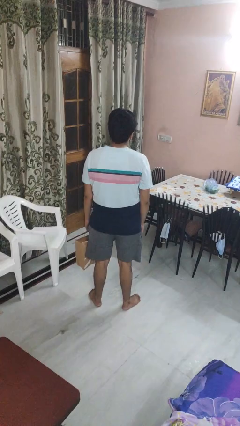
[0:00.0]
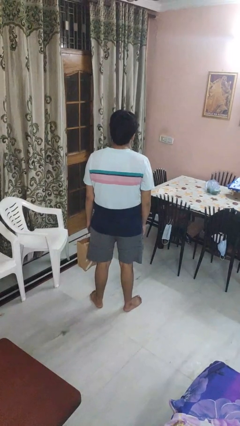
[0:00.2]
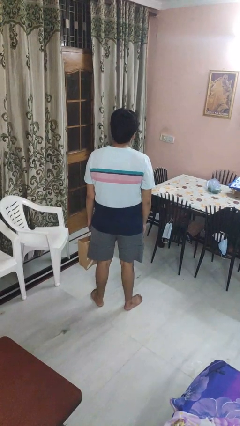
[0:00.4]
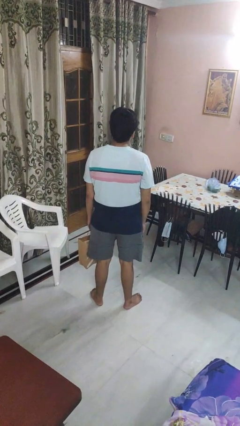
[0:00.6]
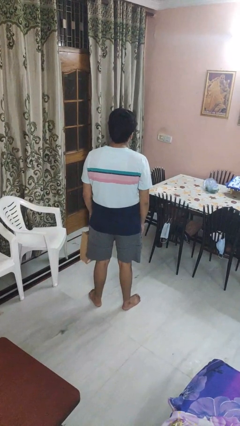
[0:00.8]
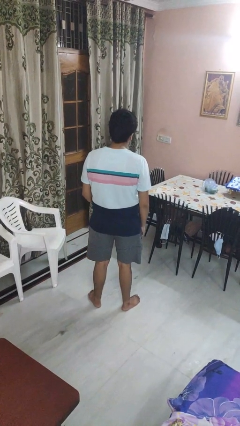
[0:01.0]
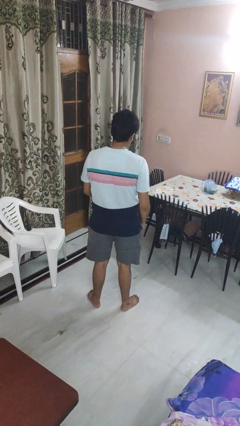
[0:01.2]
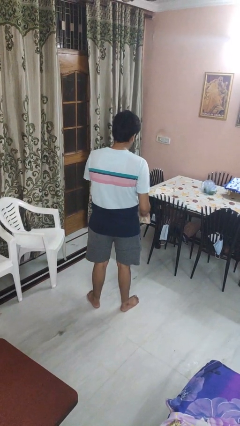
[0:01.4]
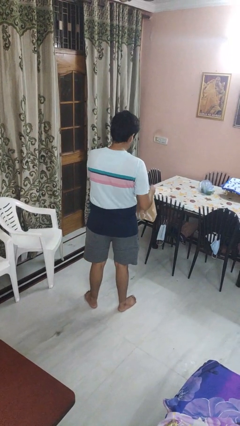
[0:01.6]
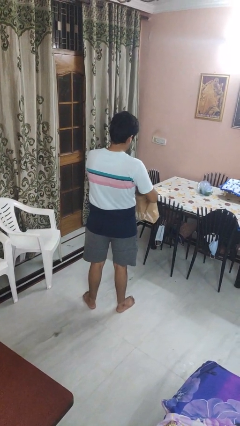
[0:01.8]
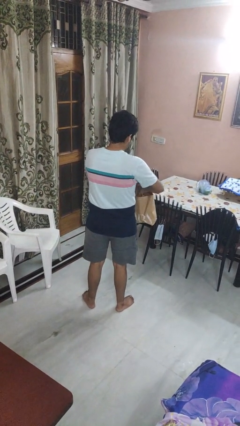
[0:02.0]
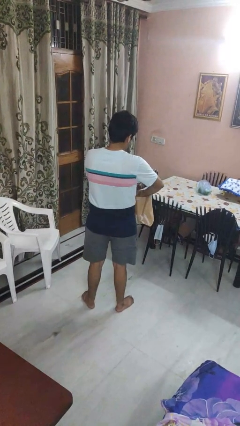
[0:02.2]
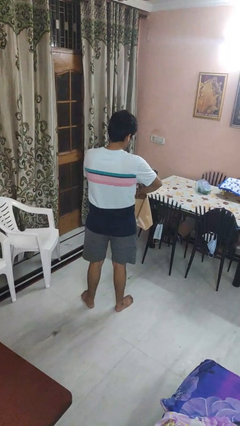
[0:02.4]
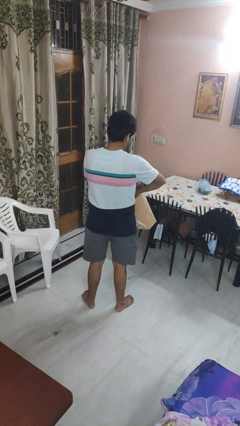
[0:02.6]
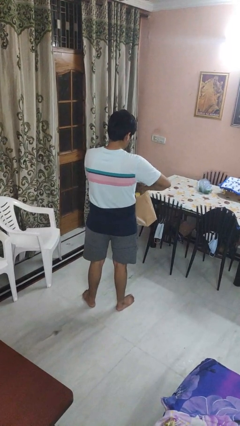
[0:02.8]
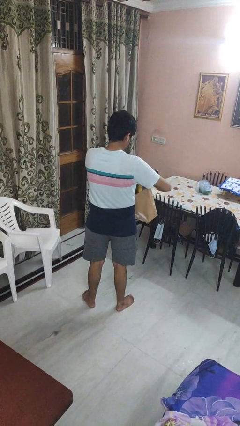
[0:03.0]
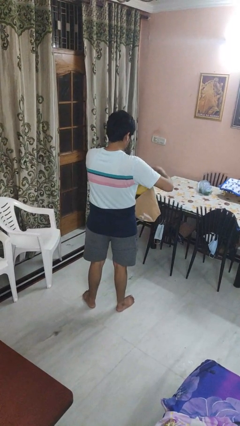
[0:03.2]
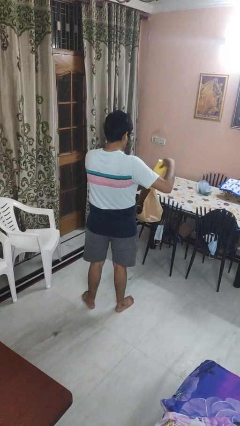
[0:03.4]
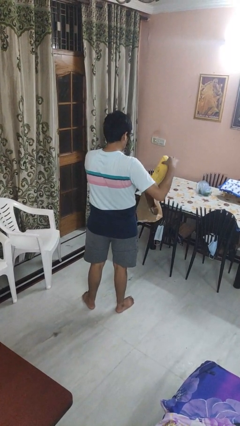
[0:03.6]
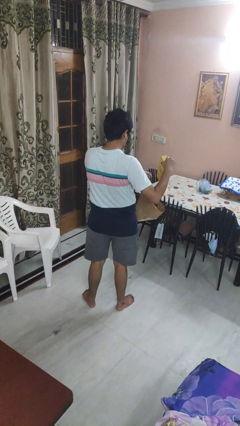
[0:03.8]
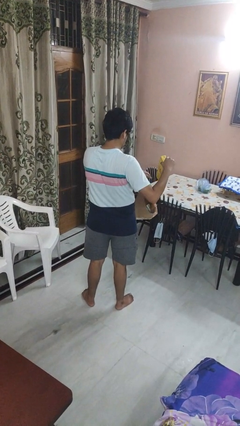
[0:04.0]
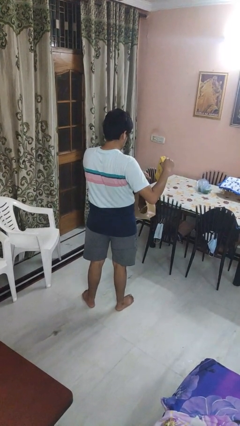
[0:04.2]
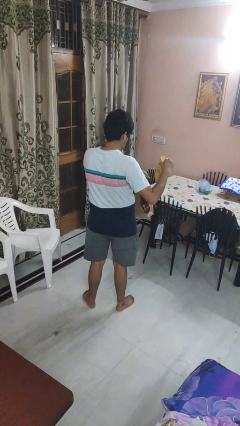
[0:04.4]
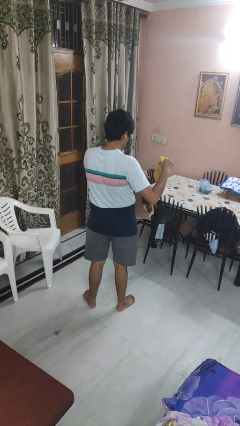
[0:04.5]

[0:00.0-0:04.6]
person takes object from bag

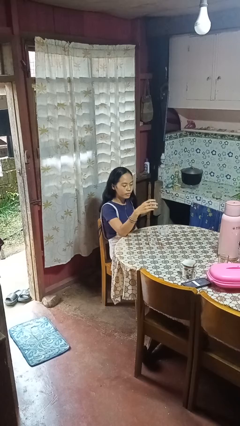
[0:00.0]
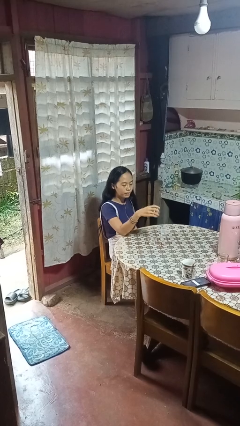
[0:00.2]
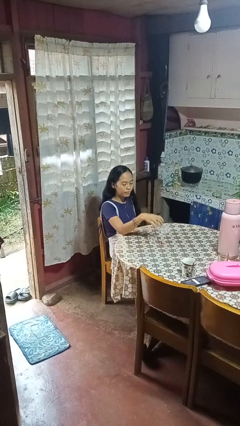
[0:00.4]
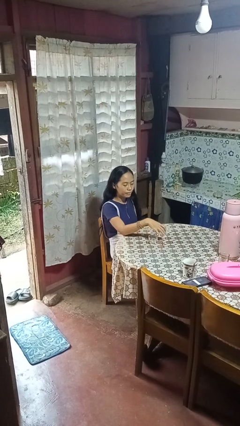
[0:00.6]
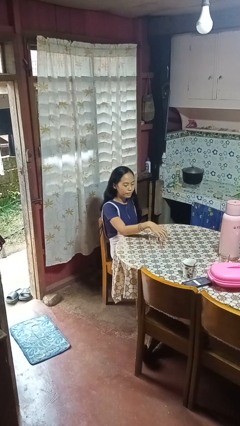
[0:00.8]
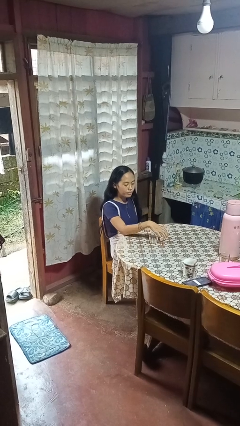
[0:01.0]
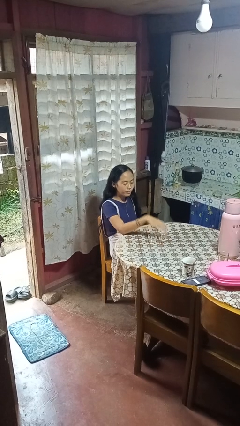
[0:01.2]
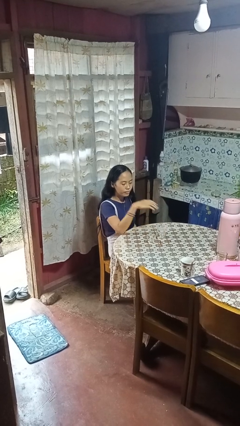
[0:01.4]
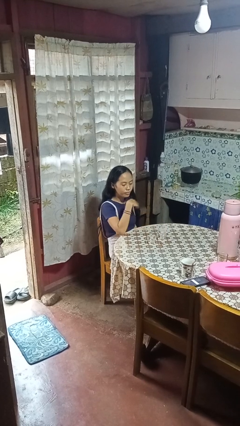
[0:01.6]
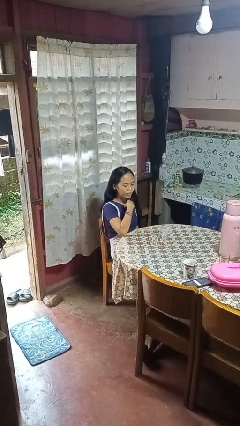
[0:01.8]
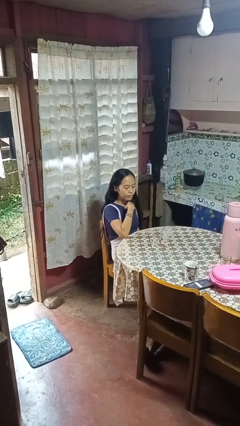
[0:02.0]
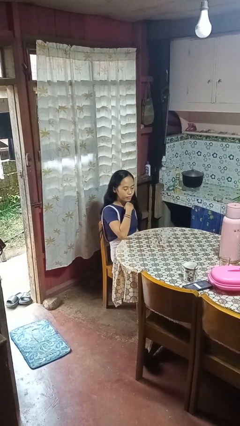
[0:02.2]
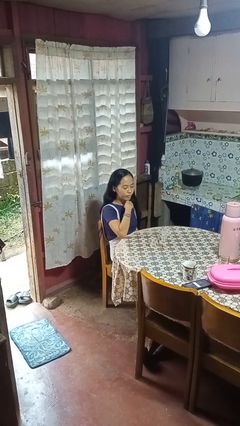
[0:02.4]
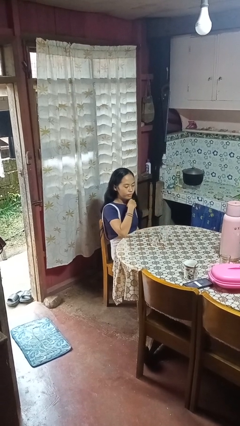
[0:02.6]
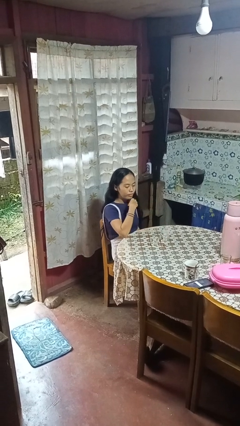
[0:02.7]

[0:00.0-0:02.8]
person puts down object on table

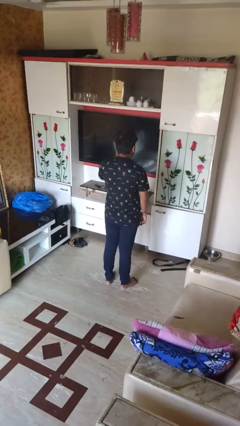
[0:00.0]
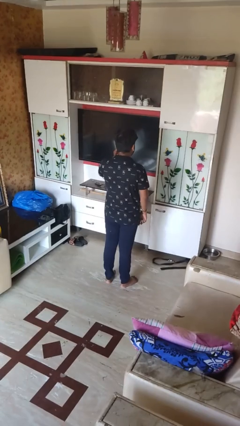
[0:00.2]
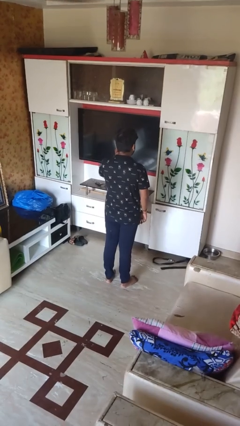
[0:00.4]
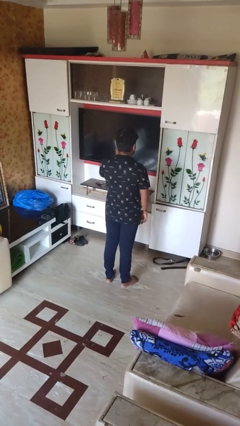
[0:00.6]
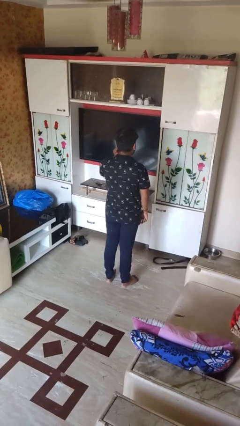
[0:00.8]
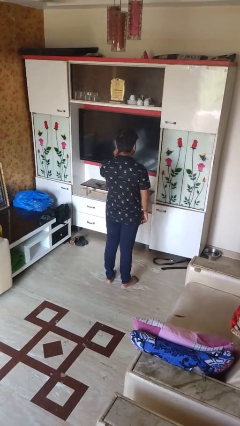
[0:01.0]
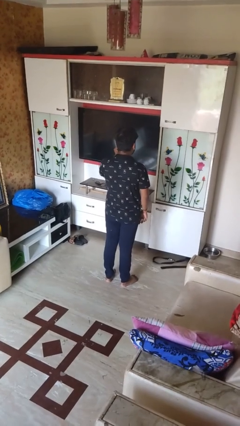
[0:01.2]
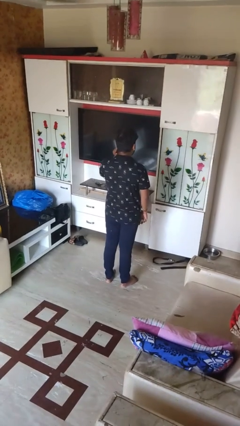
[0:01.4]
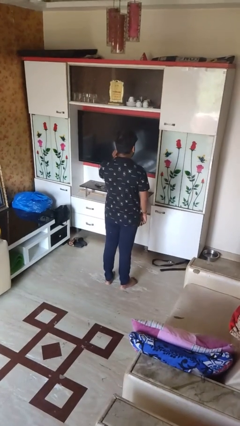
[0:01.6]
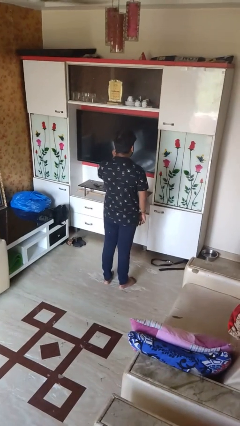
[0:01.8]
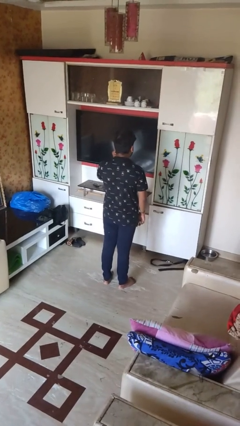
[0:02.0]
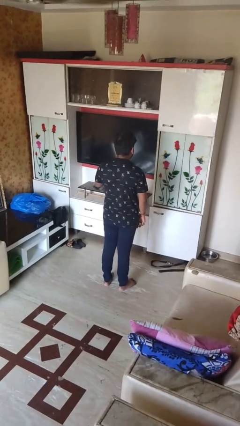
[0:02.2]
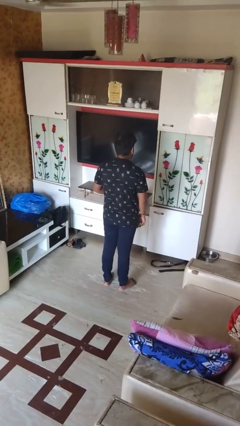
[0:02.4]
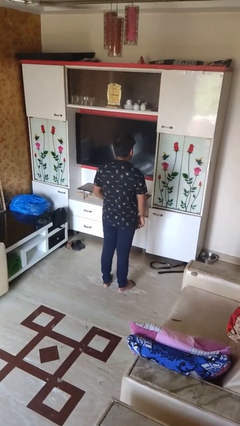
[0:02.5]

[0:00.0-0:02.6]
person touches earlobe

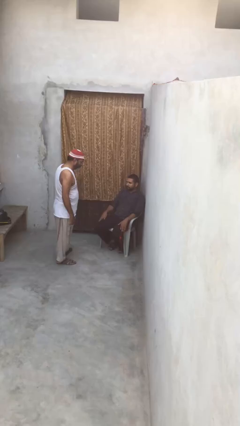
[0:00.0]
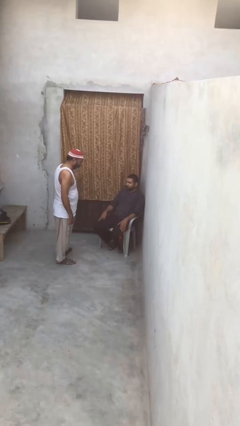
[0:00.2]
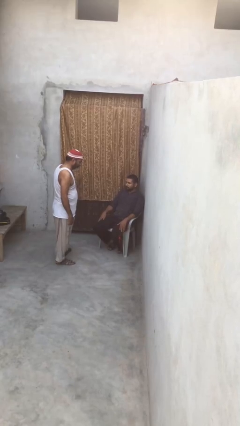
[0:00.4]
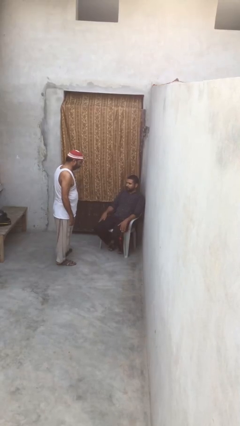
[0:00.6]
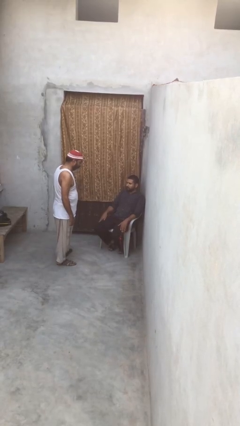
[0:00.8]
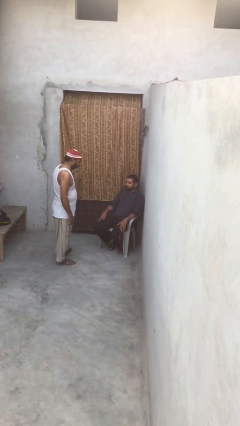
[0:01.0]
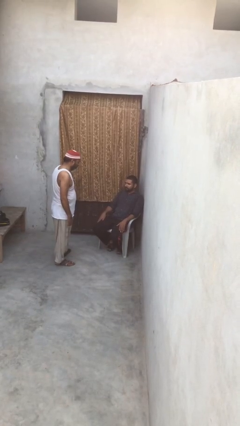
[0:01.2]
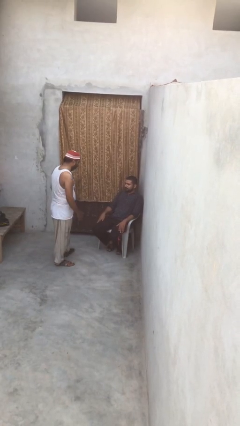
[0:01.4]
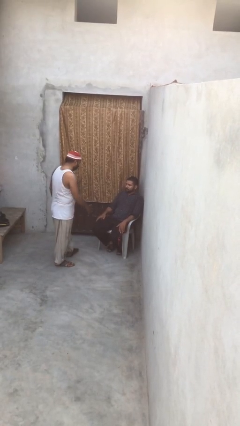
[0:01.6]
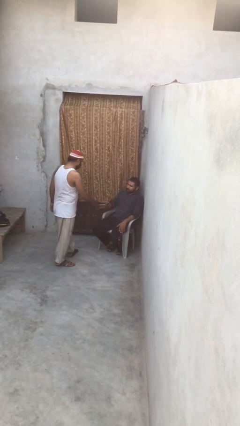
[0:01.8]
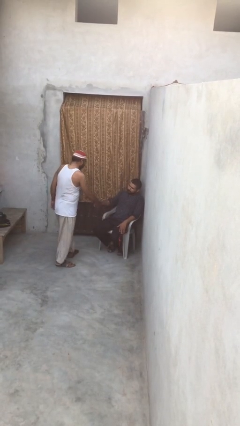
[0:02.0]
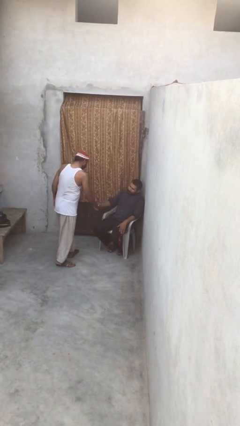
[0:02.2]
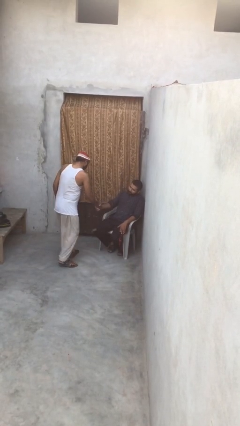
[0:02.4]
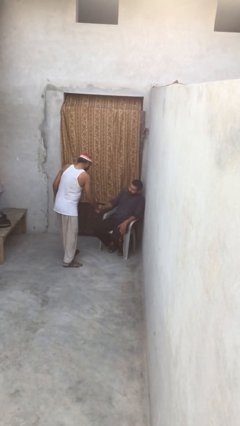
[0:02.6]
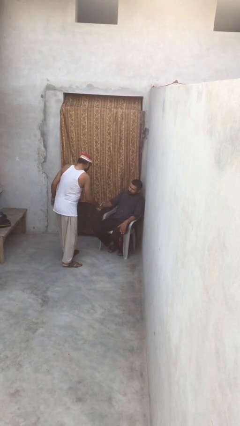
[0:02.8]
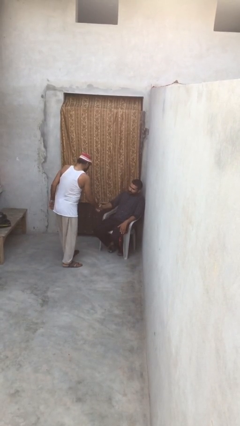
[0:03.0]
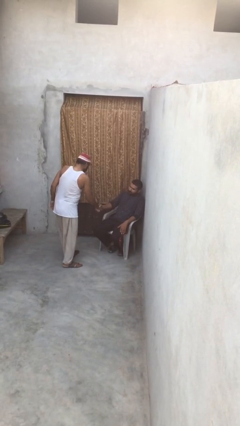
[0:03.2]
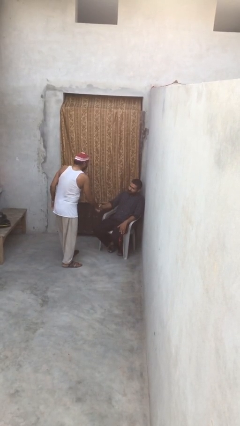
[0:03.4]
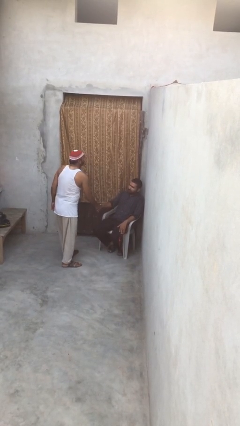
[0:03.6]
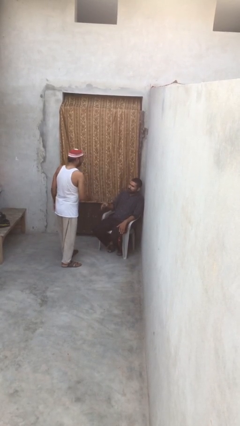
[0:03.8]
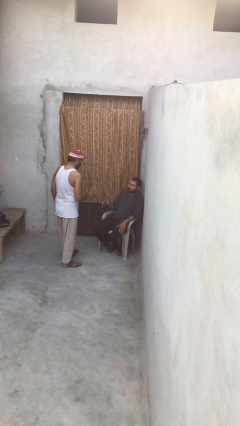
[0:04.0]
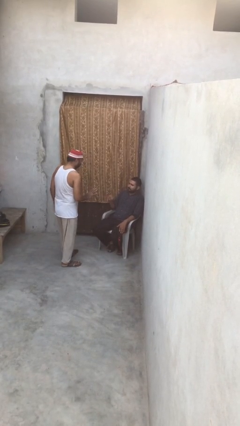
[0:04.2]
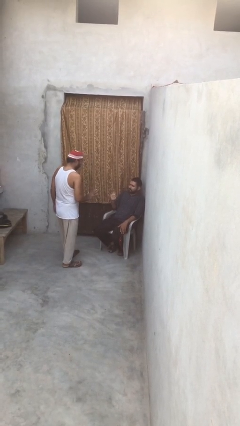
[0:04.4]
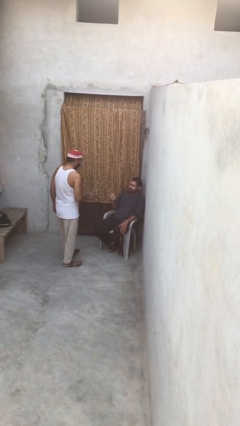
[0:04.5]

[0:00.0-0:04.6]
person shakes hand

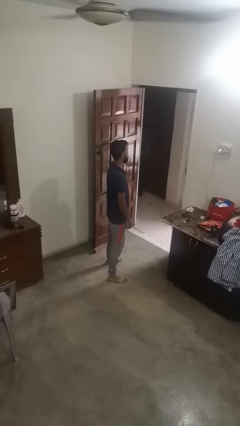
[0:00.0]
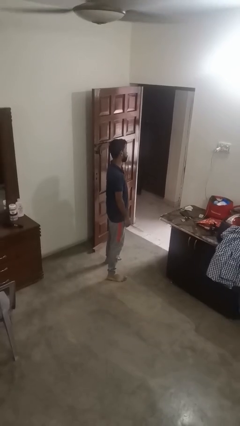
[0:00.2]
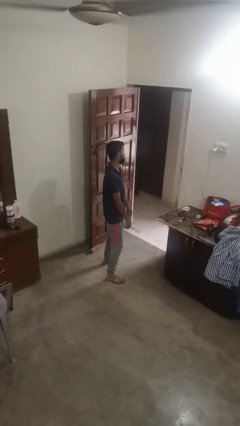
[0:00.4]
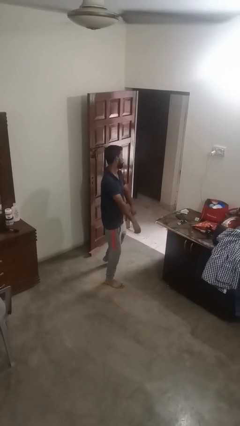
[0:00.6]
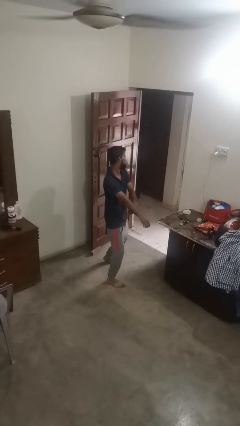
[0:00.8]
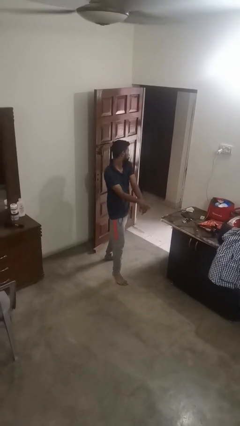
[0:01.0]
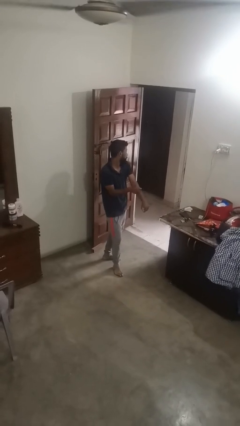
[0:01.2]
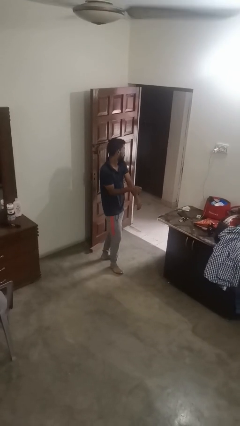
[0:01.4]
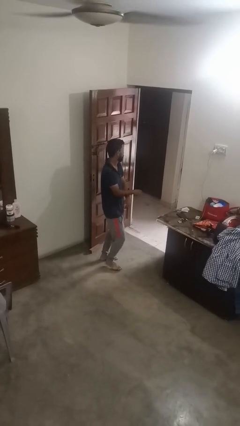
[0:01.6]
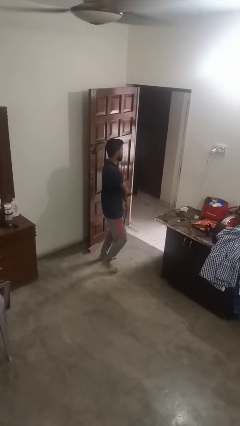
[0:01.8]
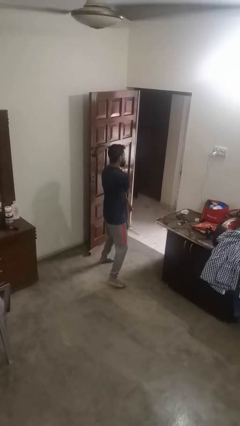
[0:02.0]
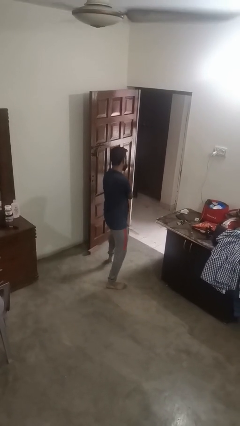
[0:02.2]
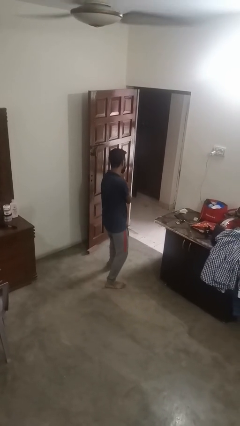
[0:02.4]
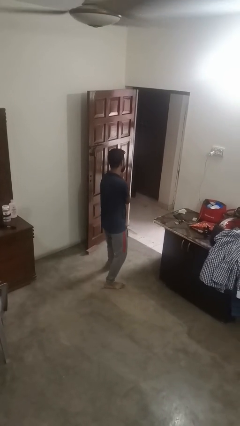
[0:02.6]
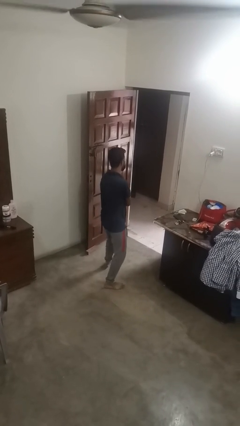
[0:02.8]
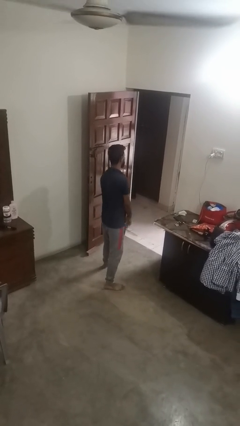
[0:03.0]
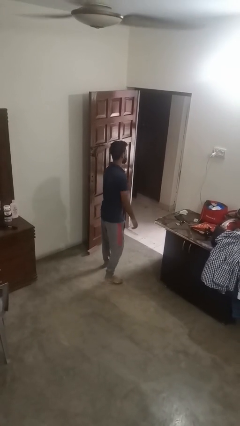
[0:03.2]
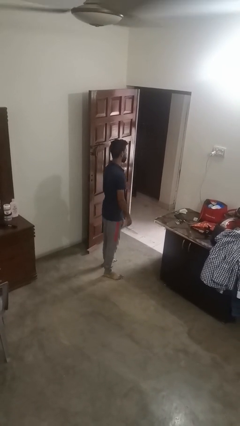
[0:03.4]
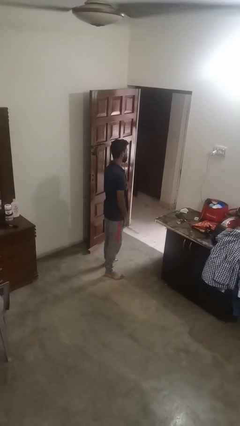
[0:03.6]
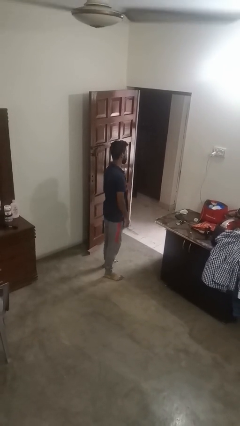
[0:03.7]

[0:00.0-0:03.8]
person dances in place
